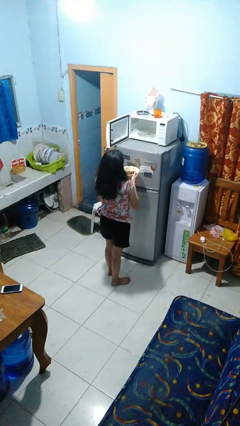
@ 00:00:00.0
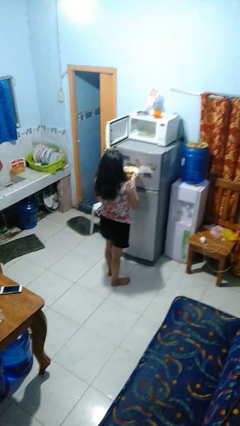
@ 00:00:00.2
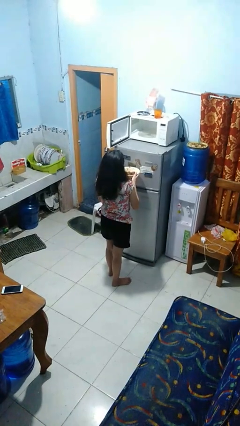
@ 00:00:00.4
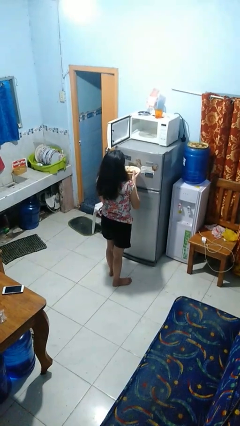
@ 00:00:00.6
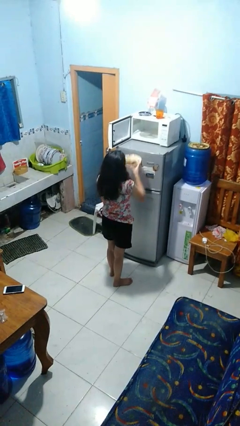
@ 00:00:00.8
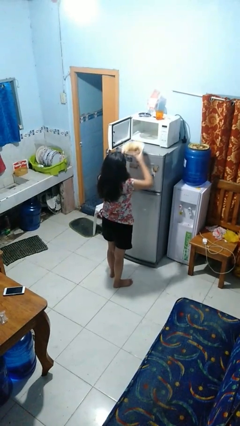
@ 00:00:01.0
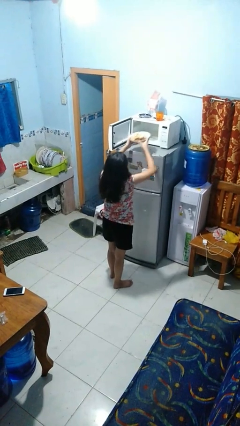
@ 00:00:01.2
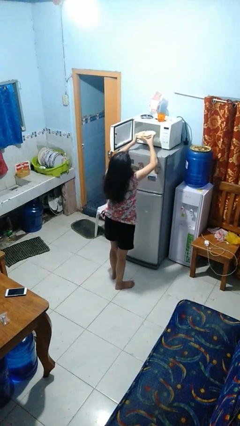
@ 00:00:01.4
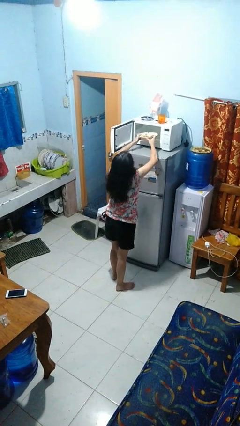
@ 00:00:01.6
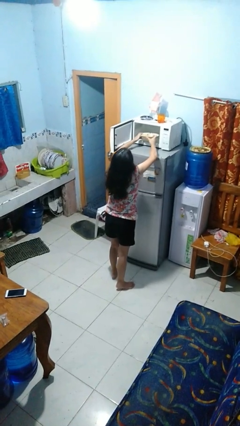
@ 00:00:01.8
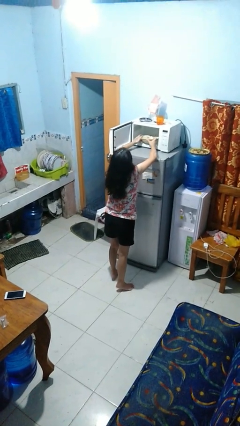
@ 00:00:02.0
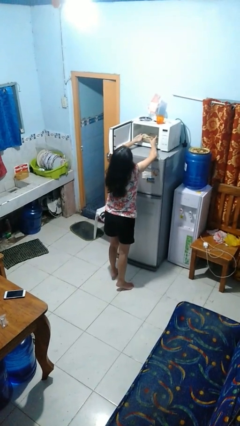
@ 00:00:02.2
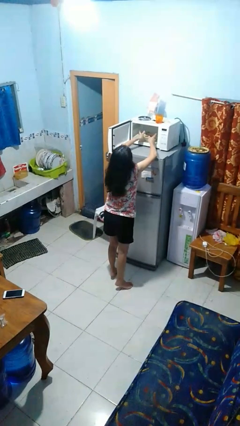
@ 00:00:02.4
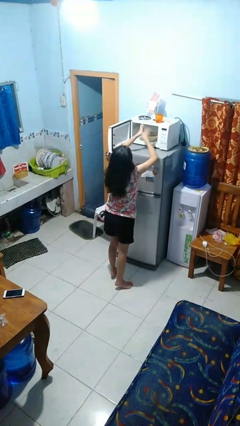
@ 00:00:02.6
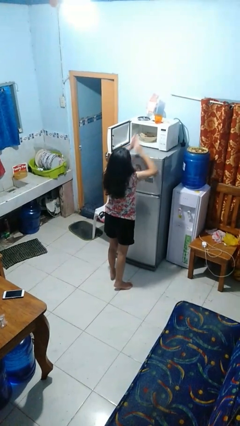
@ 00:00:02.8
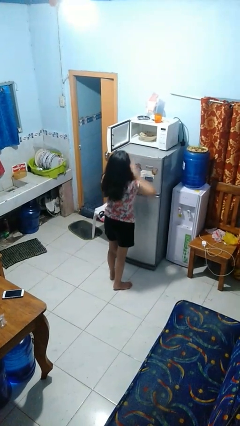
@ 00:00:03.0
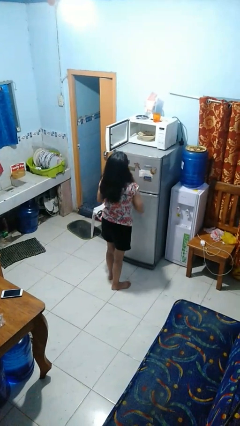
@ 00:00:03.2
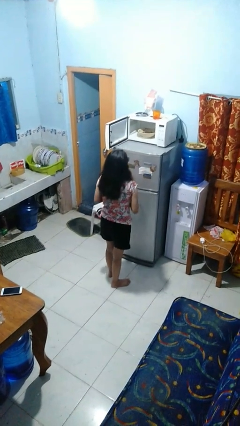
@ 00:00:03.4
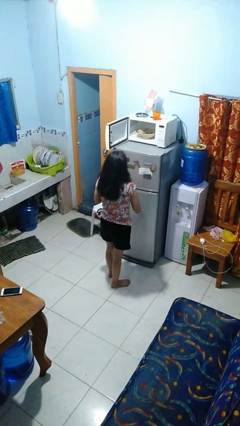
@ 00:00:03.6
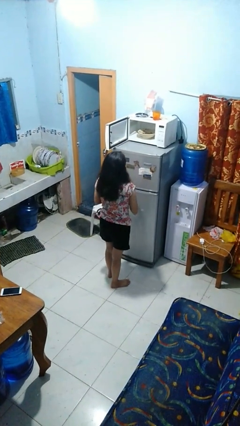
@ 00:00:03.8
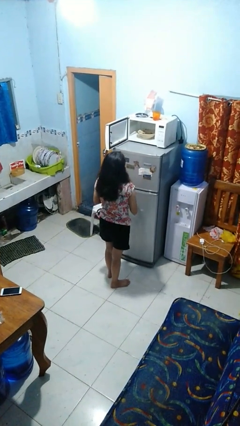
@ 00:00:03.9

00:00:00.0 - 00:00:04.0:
person puts object into microwave

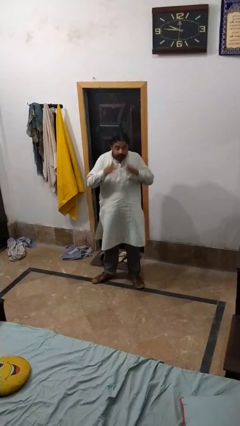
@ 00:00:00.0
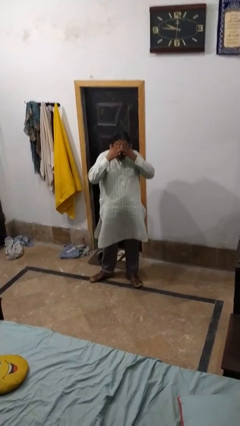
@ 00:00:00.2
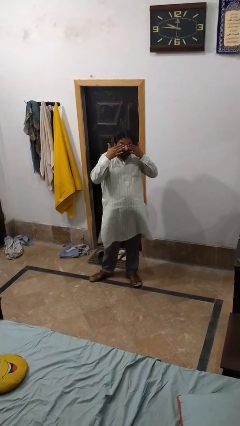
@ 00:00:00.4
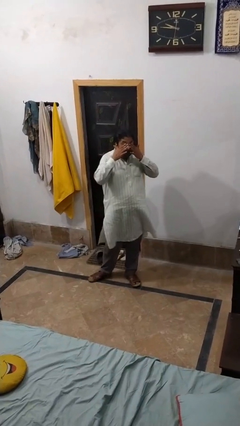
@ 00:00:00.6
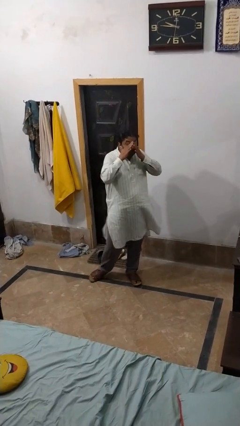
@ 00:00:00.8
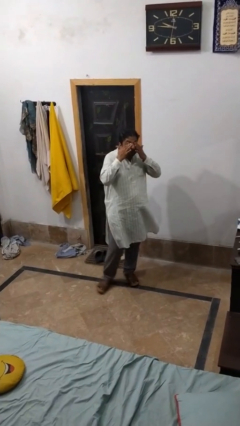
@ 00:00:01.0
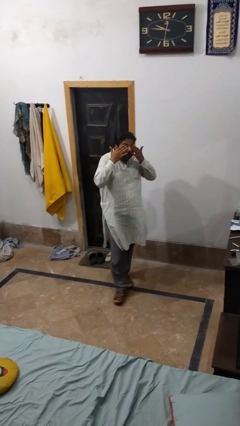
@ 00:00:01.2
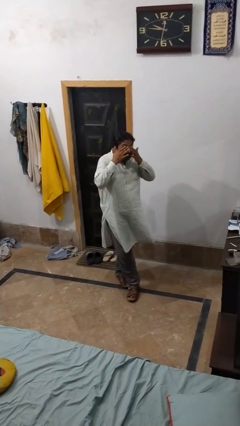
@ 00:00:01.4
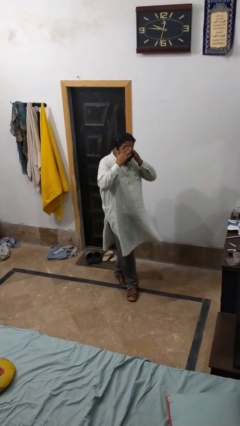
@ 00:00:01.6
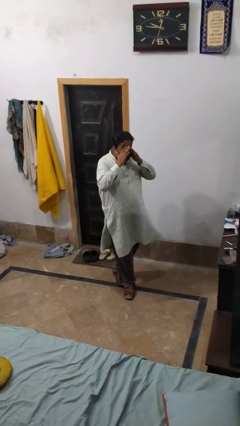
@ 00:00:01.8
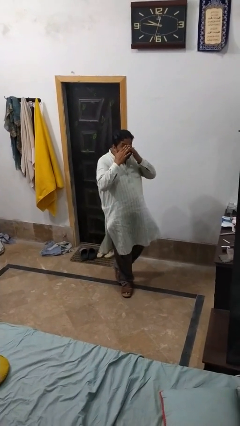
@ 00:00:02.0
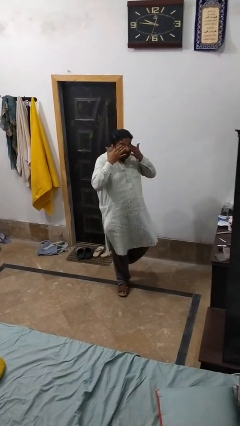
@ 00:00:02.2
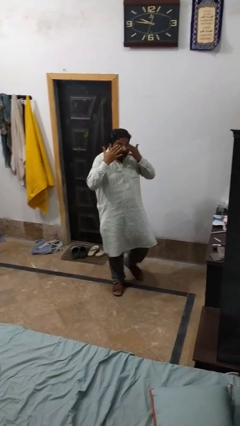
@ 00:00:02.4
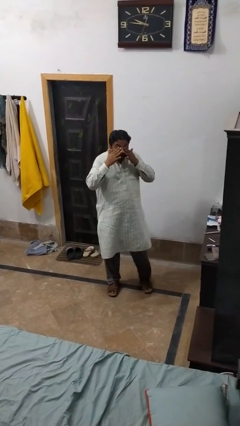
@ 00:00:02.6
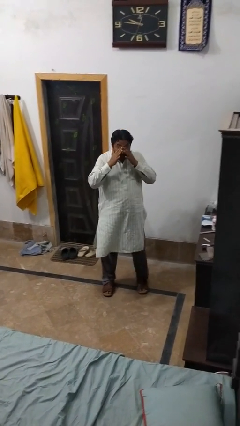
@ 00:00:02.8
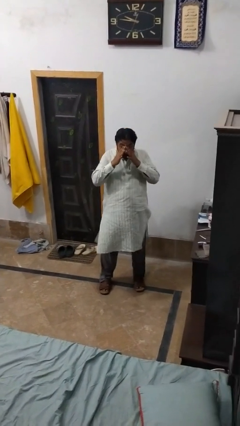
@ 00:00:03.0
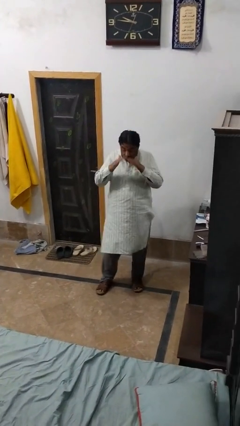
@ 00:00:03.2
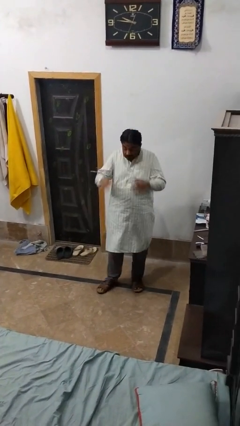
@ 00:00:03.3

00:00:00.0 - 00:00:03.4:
person rubs eyes

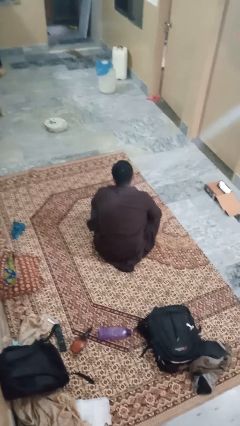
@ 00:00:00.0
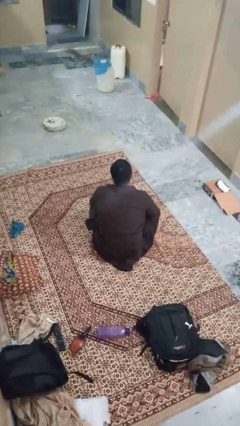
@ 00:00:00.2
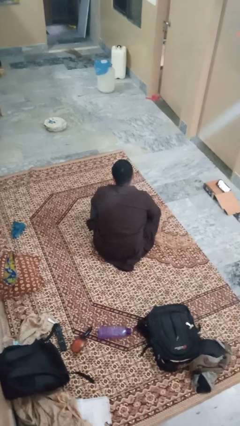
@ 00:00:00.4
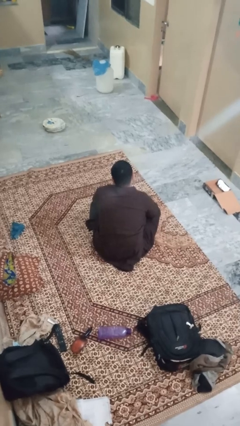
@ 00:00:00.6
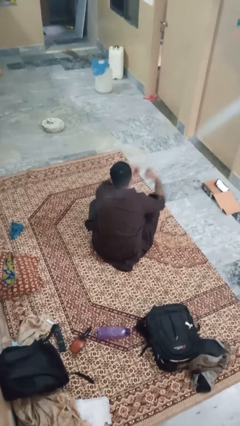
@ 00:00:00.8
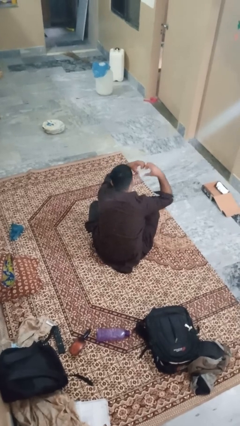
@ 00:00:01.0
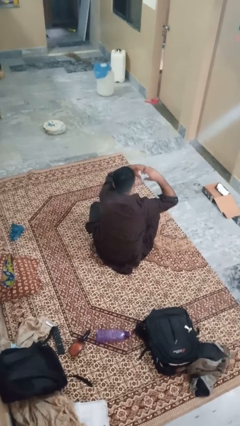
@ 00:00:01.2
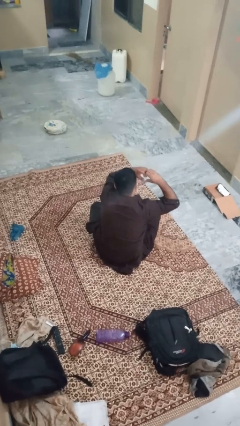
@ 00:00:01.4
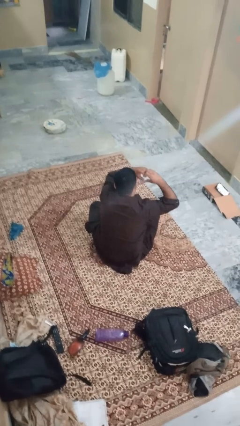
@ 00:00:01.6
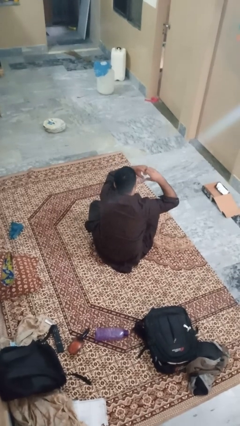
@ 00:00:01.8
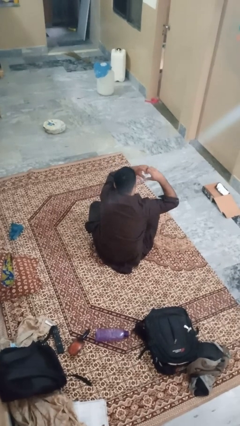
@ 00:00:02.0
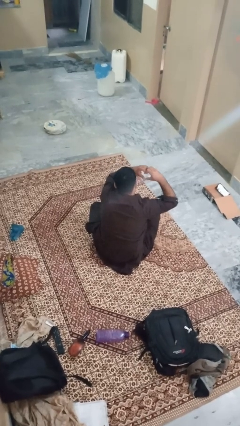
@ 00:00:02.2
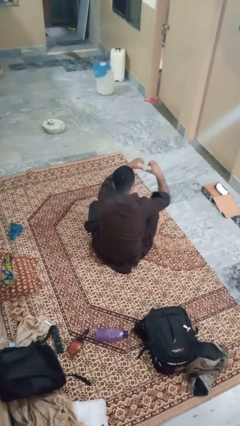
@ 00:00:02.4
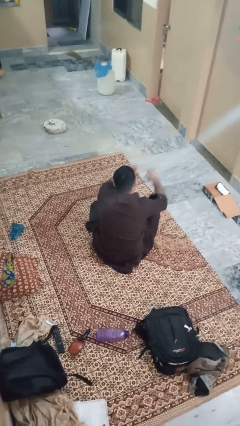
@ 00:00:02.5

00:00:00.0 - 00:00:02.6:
person gestures heart

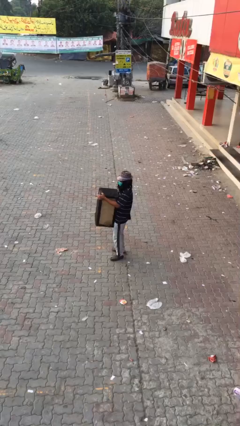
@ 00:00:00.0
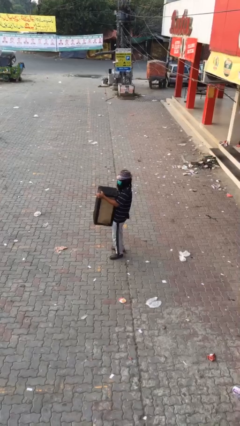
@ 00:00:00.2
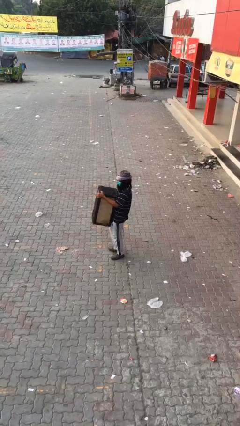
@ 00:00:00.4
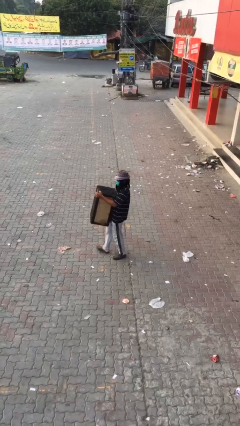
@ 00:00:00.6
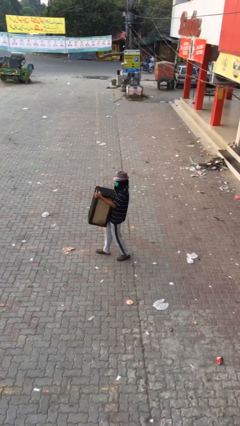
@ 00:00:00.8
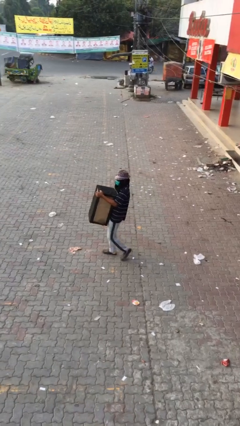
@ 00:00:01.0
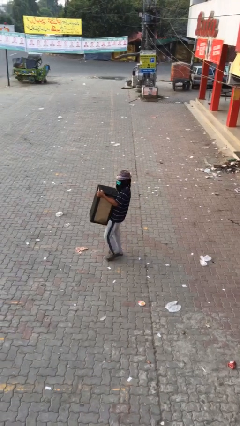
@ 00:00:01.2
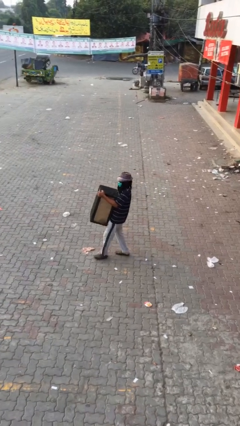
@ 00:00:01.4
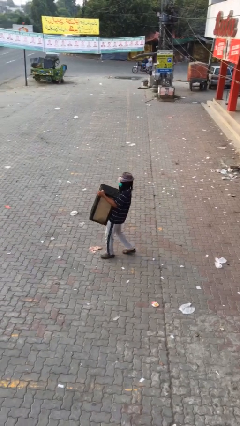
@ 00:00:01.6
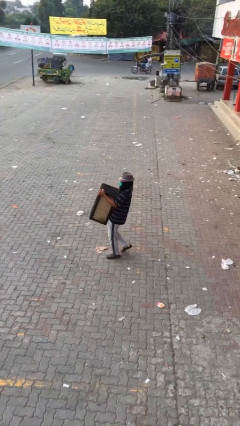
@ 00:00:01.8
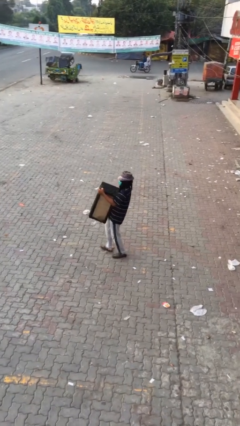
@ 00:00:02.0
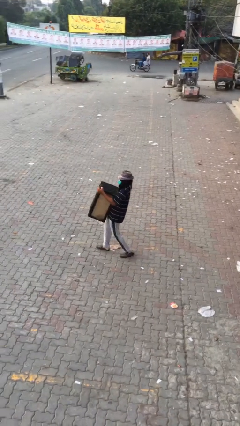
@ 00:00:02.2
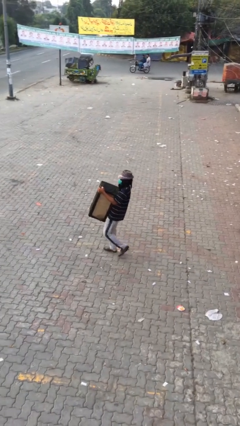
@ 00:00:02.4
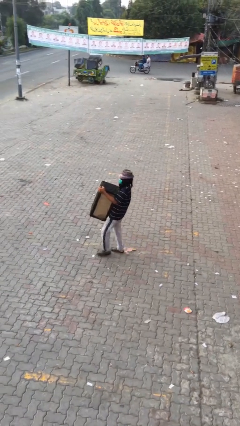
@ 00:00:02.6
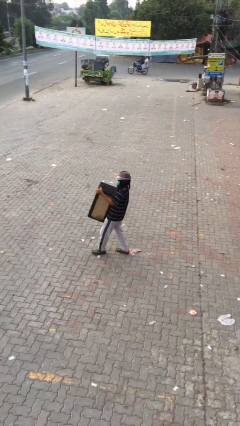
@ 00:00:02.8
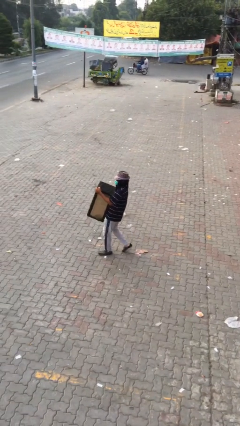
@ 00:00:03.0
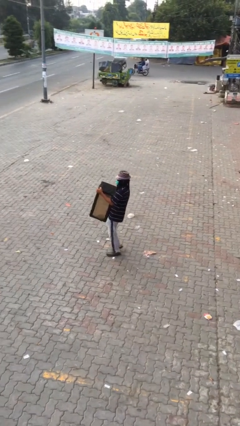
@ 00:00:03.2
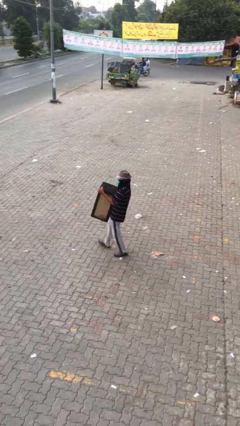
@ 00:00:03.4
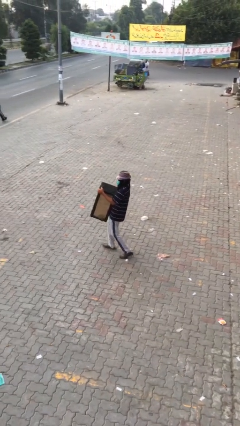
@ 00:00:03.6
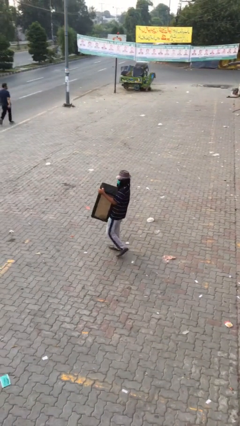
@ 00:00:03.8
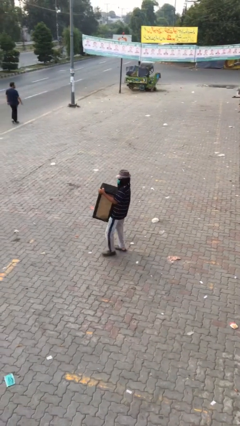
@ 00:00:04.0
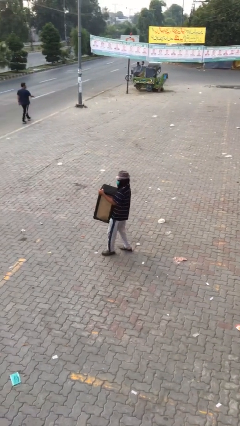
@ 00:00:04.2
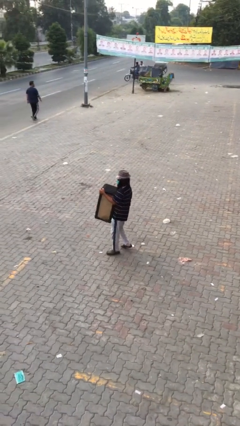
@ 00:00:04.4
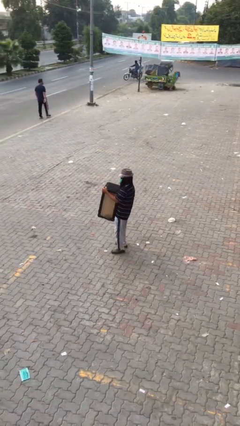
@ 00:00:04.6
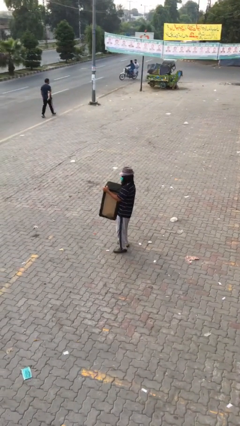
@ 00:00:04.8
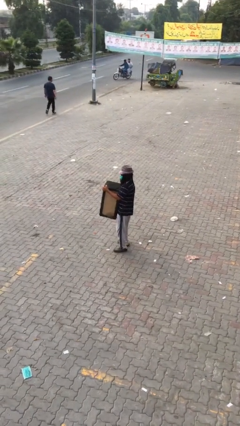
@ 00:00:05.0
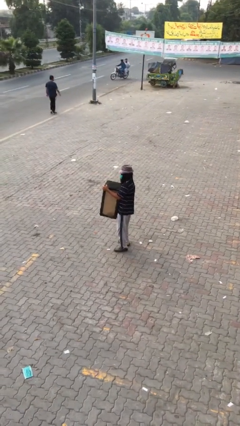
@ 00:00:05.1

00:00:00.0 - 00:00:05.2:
person carries heavy object

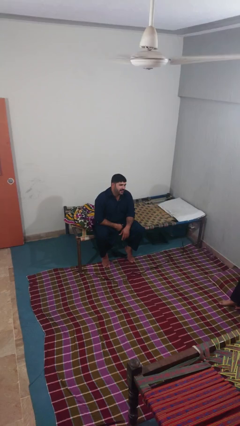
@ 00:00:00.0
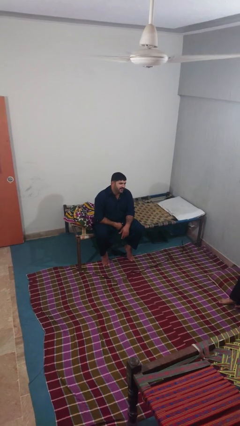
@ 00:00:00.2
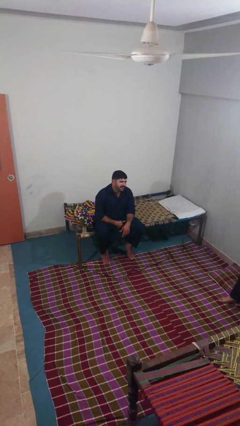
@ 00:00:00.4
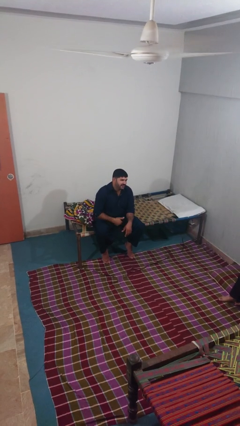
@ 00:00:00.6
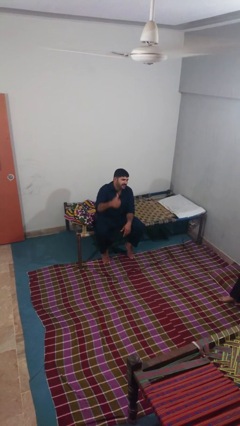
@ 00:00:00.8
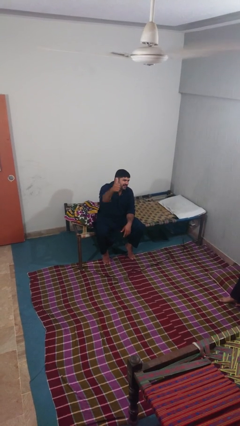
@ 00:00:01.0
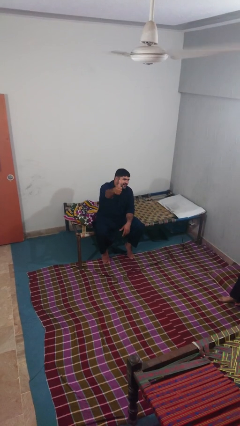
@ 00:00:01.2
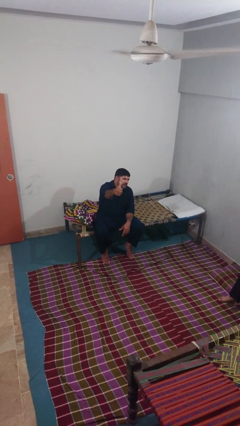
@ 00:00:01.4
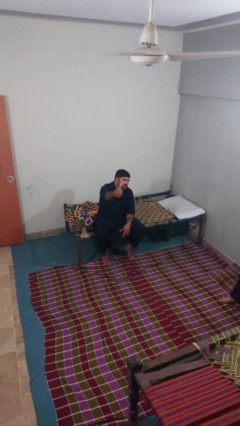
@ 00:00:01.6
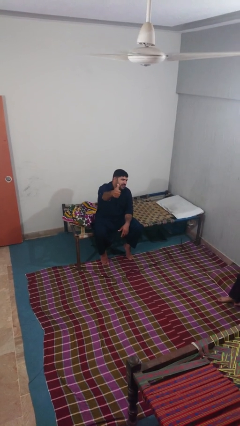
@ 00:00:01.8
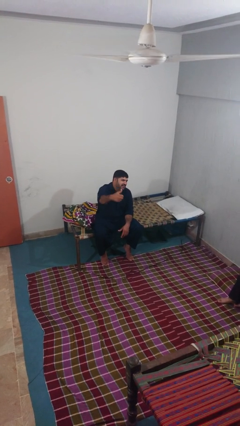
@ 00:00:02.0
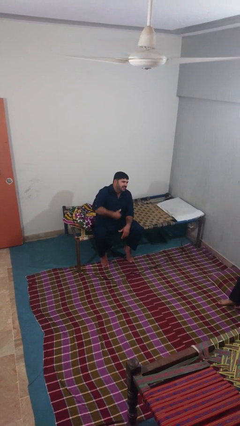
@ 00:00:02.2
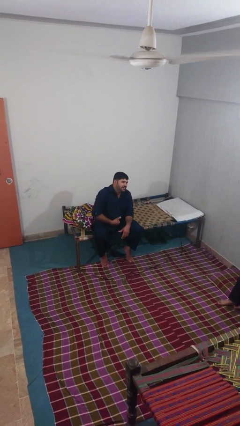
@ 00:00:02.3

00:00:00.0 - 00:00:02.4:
person gestures thumbs up
